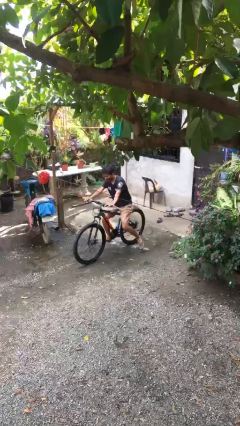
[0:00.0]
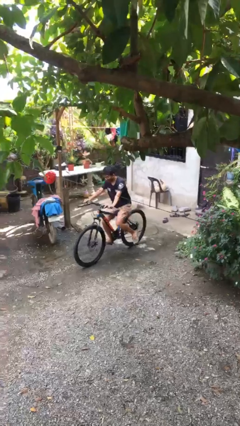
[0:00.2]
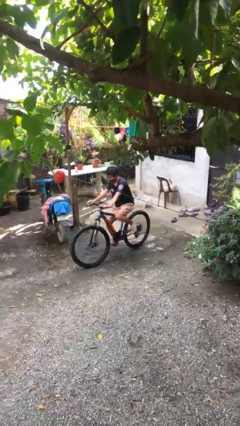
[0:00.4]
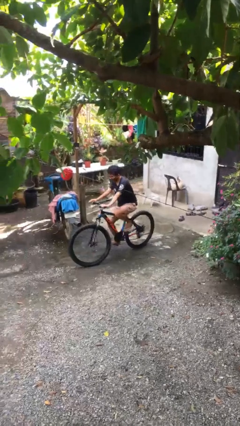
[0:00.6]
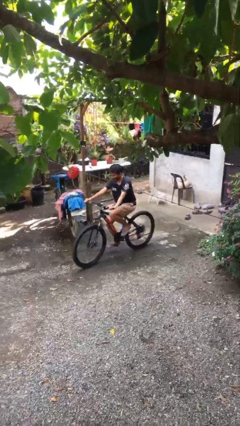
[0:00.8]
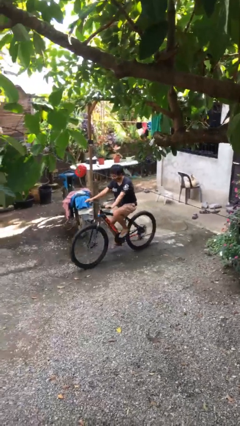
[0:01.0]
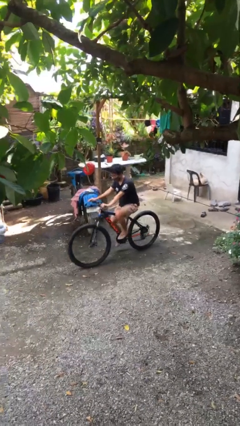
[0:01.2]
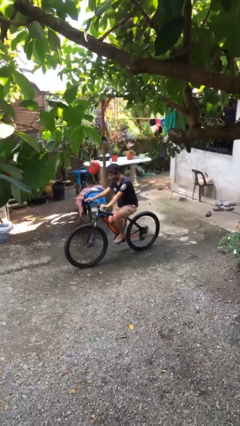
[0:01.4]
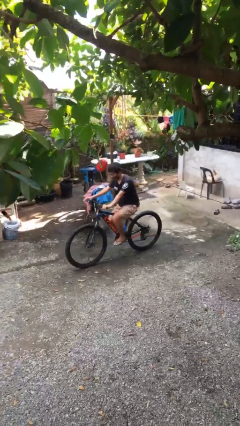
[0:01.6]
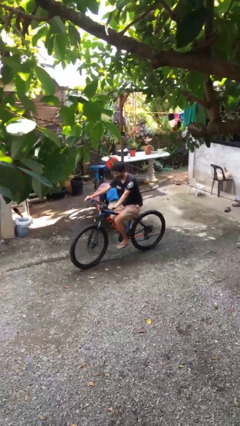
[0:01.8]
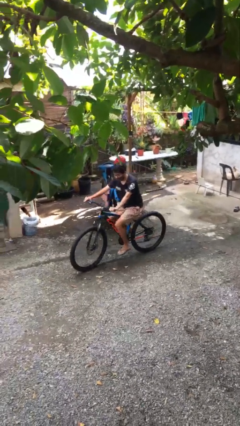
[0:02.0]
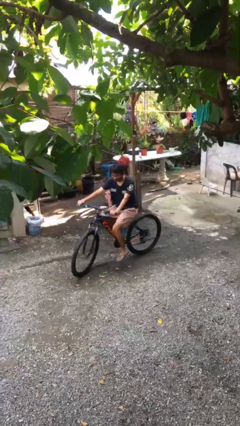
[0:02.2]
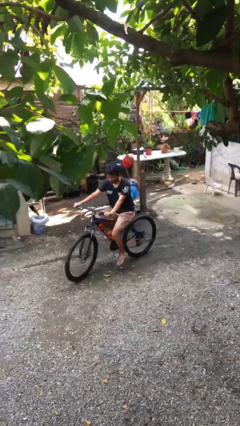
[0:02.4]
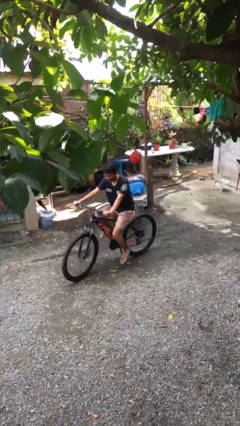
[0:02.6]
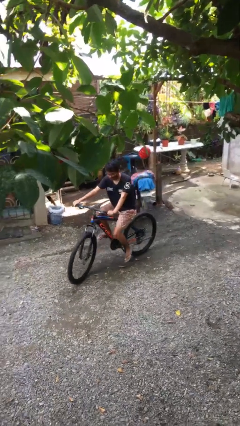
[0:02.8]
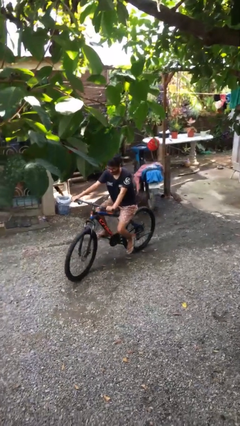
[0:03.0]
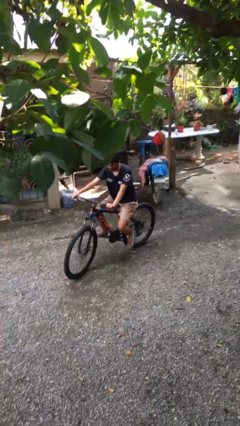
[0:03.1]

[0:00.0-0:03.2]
person rides bicycle

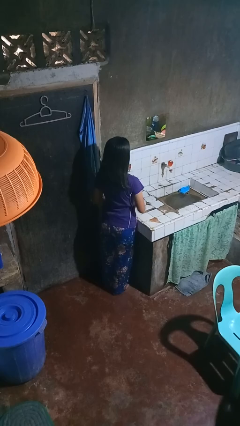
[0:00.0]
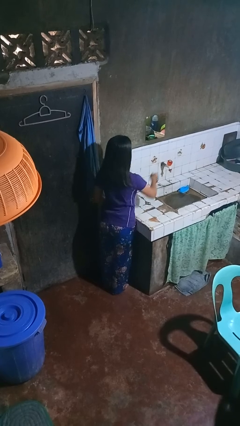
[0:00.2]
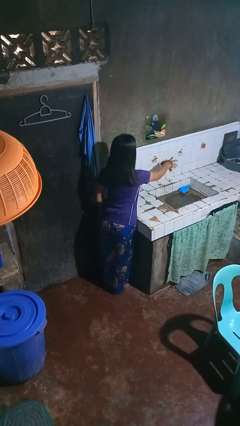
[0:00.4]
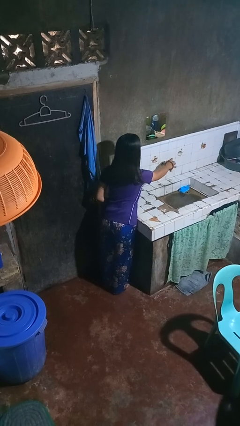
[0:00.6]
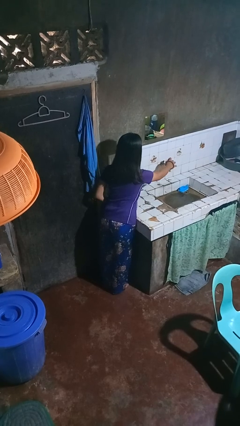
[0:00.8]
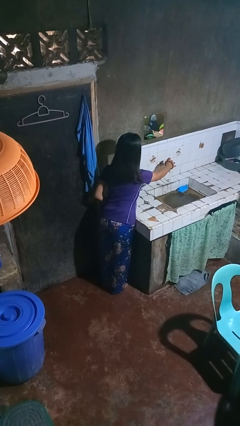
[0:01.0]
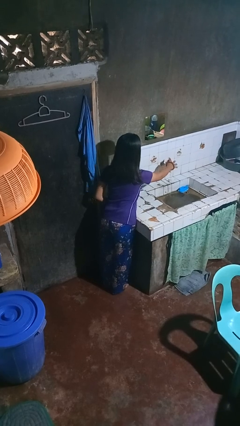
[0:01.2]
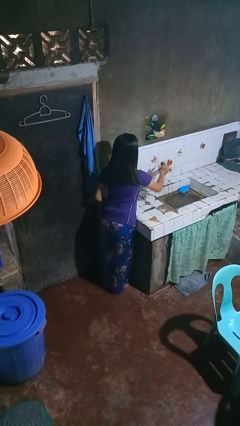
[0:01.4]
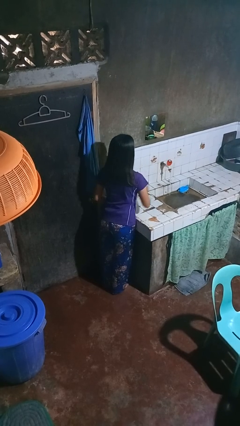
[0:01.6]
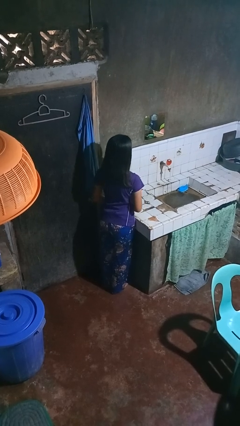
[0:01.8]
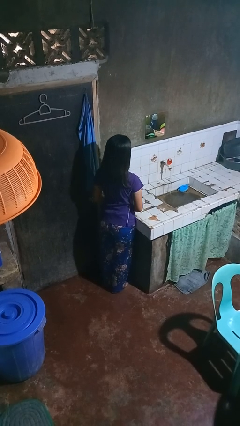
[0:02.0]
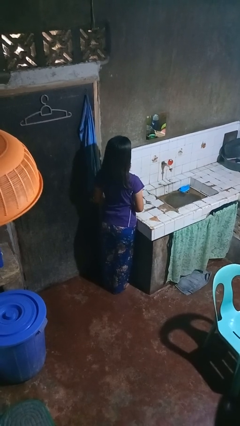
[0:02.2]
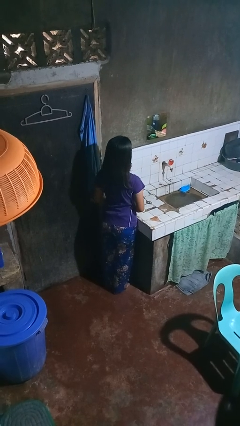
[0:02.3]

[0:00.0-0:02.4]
person turns on faucet

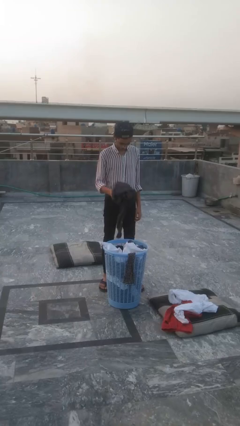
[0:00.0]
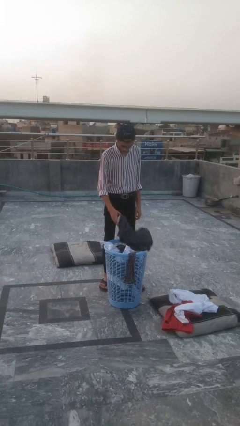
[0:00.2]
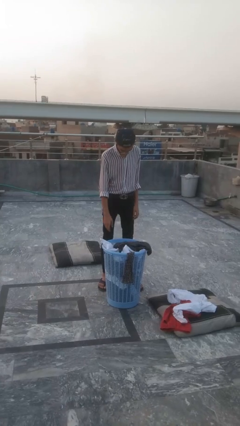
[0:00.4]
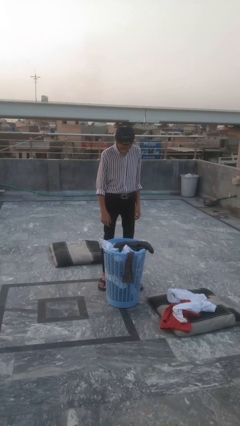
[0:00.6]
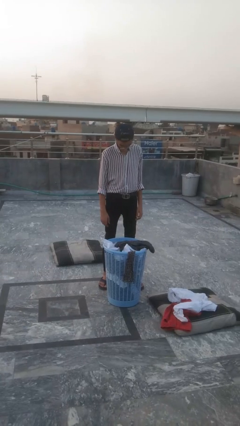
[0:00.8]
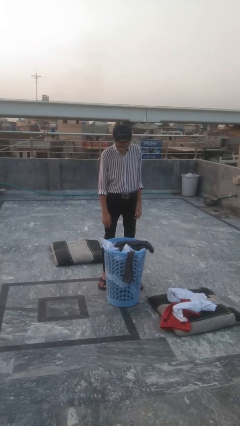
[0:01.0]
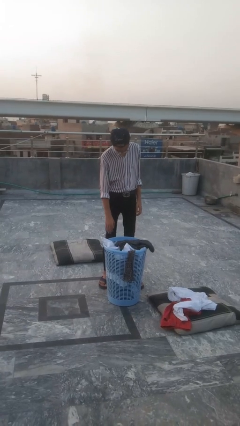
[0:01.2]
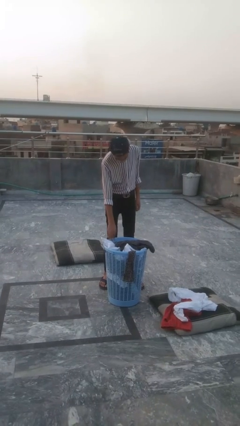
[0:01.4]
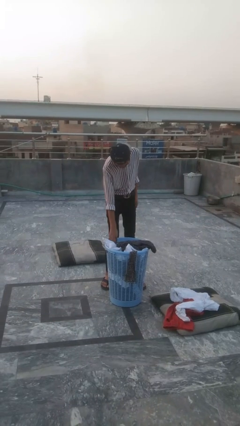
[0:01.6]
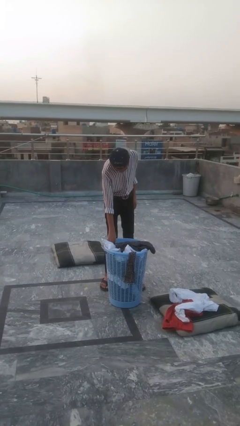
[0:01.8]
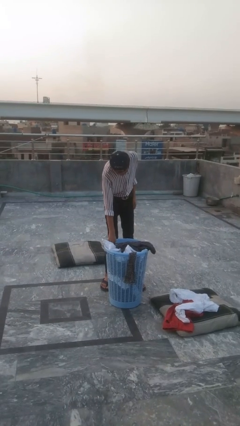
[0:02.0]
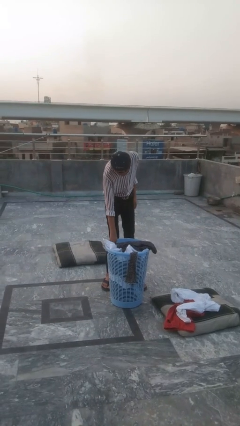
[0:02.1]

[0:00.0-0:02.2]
person puts object into basket

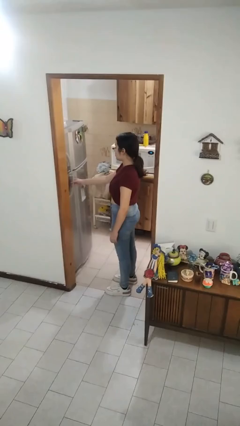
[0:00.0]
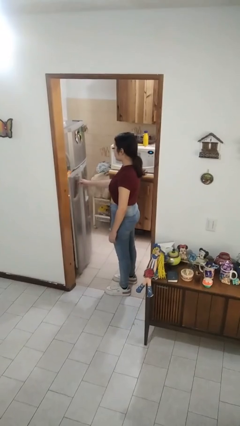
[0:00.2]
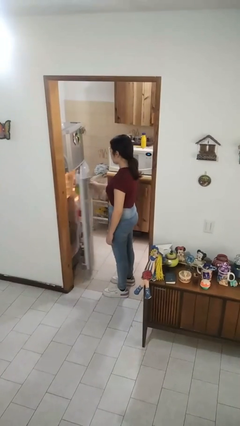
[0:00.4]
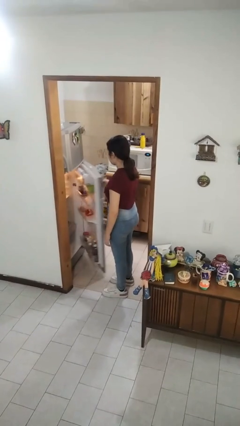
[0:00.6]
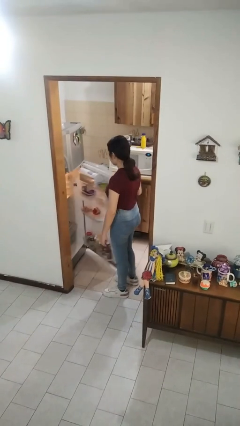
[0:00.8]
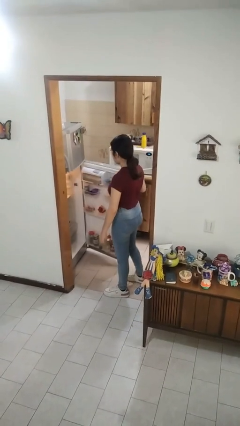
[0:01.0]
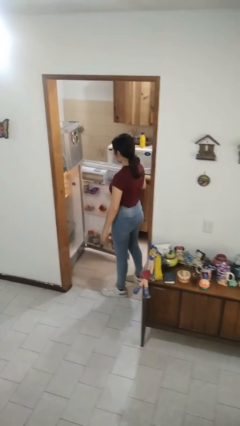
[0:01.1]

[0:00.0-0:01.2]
person opens refrigerator

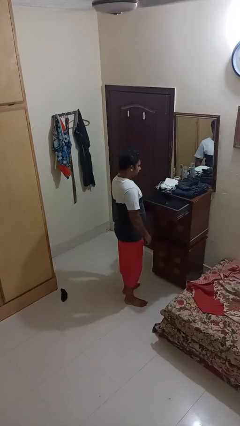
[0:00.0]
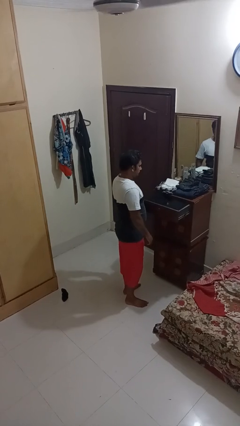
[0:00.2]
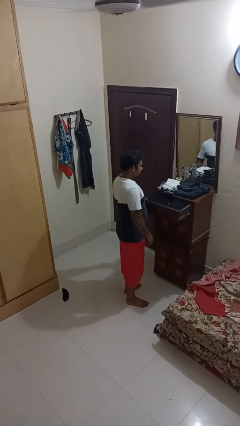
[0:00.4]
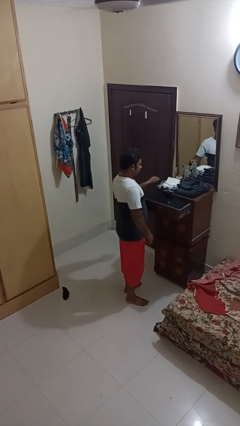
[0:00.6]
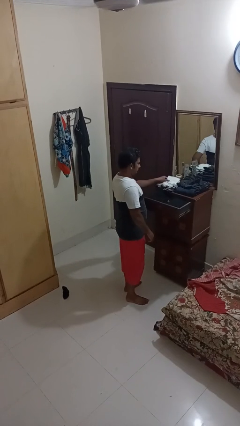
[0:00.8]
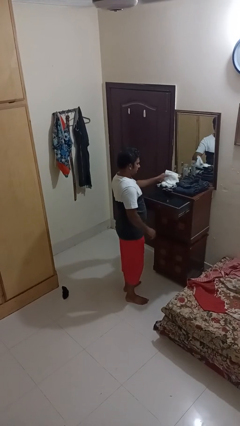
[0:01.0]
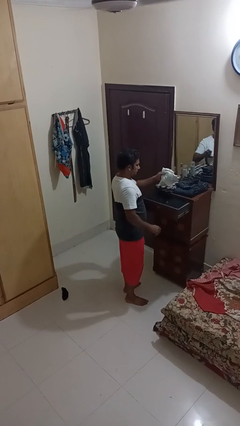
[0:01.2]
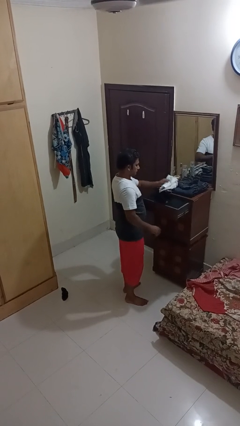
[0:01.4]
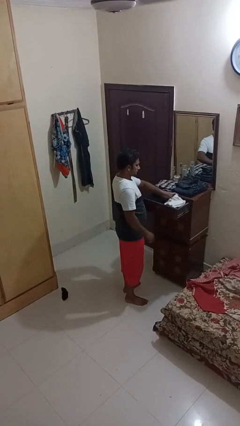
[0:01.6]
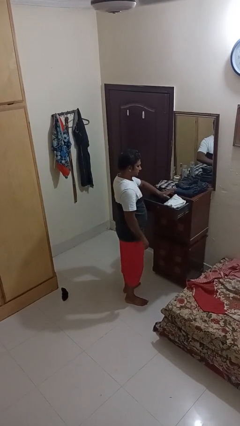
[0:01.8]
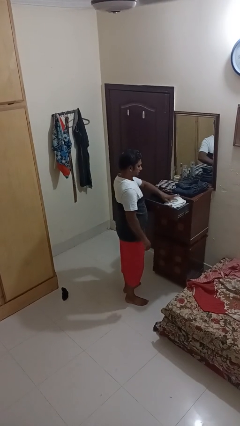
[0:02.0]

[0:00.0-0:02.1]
person puts clothes into dresser

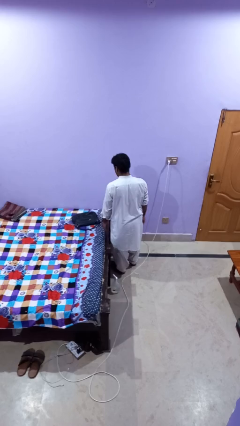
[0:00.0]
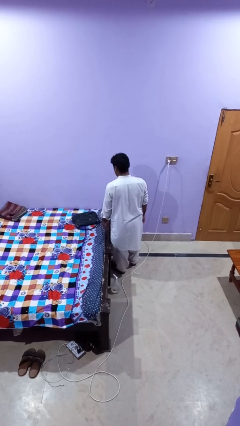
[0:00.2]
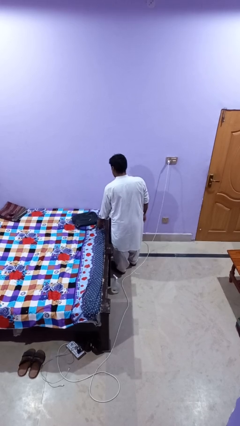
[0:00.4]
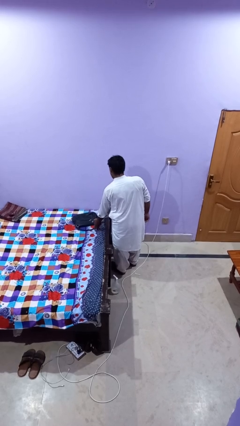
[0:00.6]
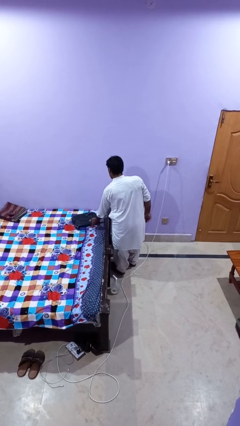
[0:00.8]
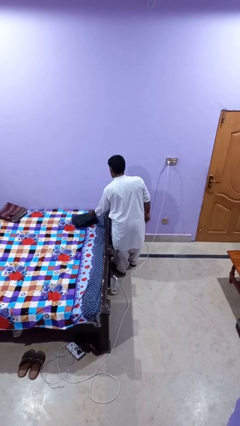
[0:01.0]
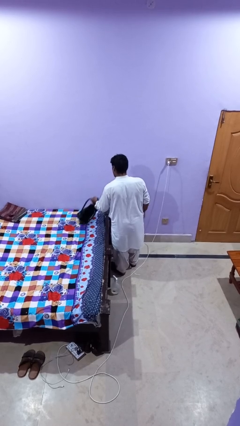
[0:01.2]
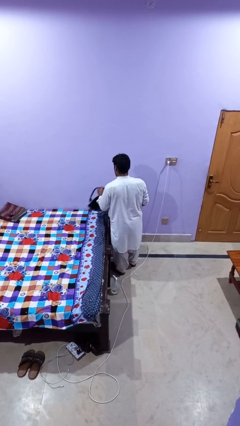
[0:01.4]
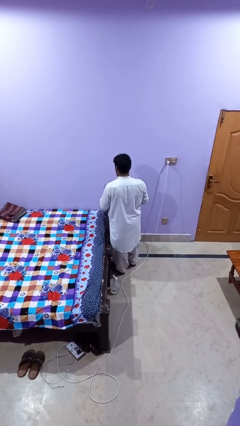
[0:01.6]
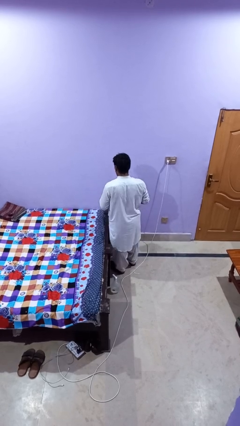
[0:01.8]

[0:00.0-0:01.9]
person picks up object from bed

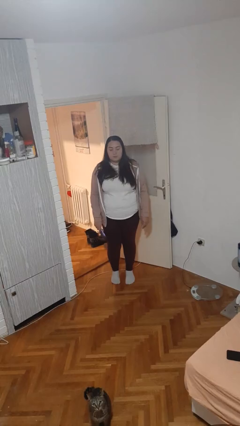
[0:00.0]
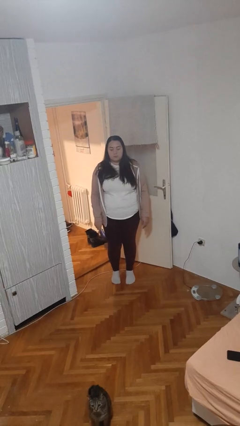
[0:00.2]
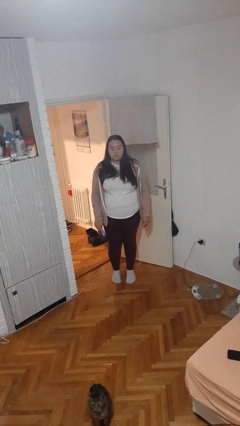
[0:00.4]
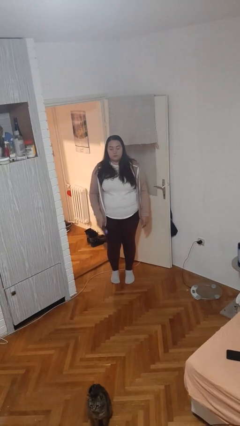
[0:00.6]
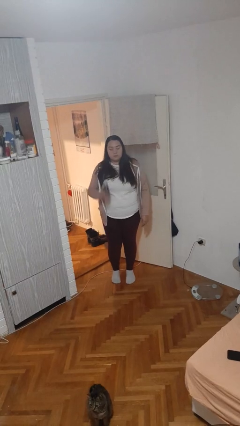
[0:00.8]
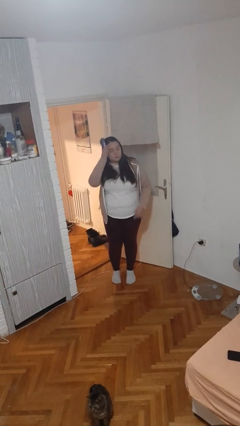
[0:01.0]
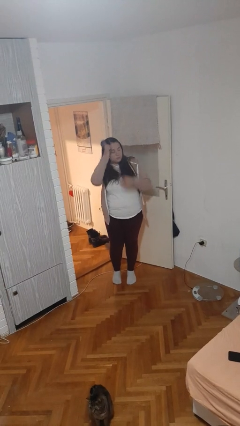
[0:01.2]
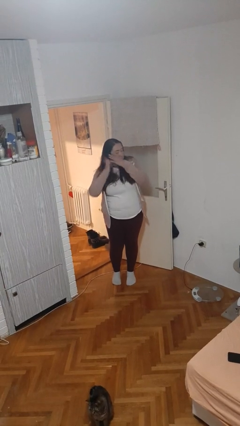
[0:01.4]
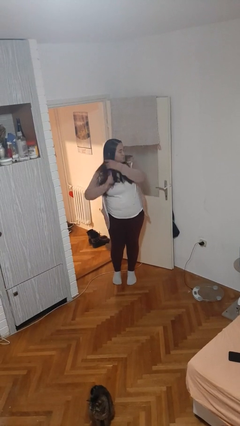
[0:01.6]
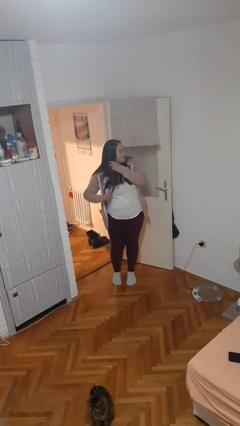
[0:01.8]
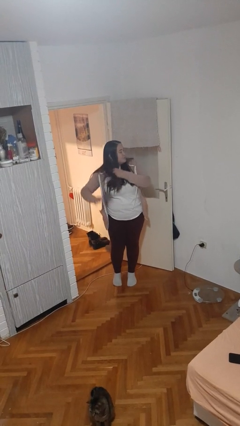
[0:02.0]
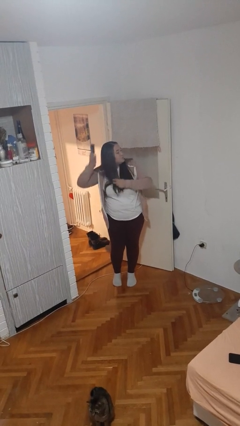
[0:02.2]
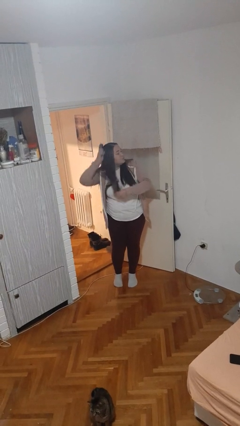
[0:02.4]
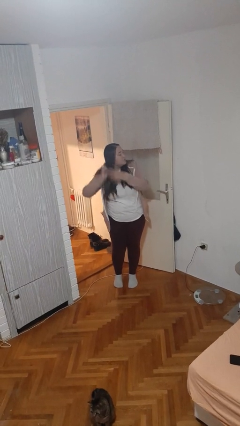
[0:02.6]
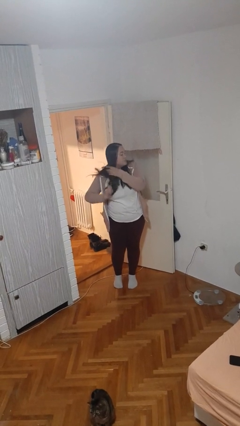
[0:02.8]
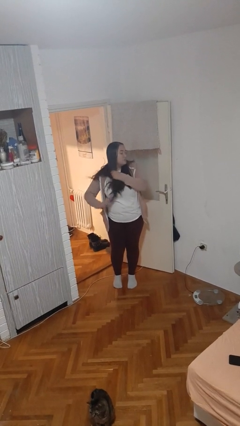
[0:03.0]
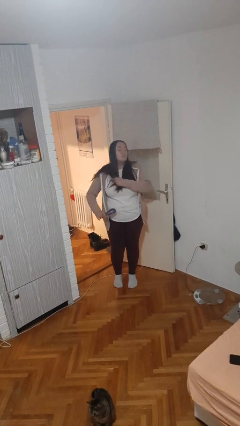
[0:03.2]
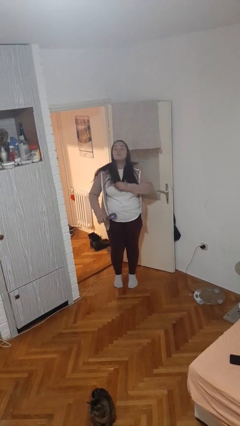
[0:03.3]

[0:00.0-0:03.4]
person brushes hair

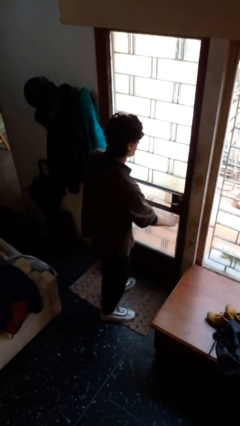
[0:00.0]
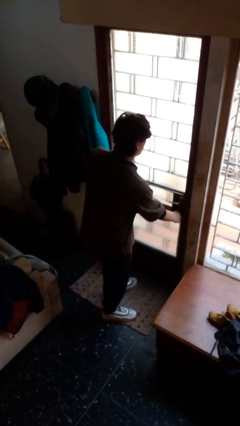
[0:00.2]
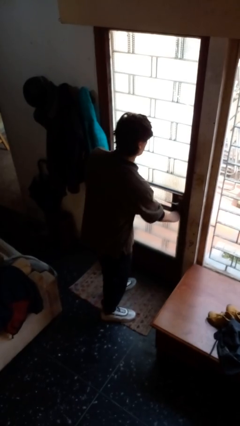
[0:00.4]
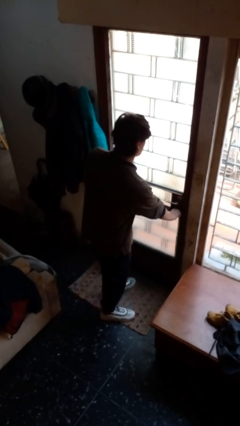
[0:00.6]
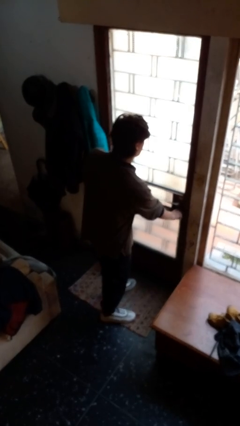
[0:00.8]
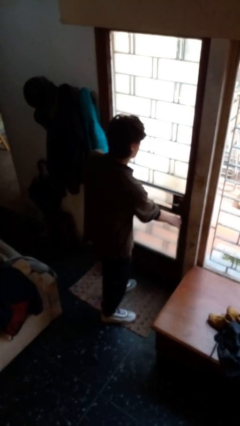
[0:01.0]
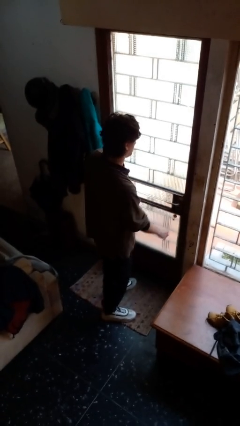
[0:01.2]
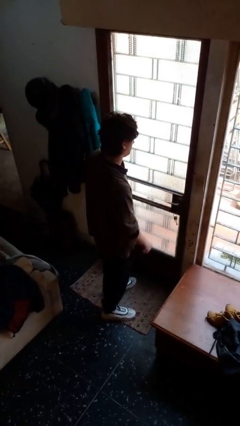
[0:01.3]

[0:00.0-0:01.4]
person unlocks door with keys
